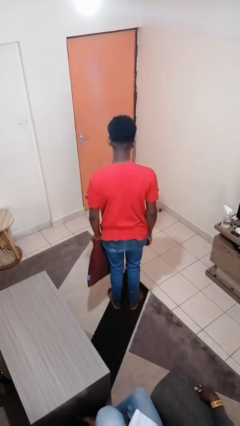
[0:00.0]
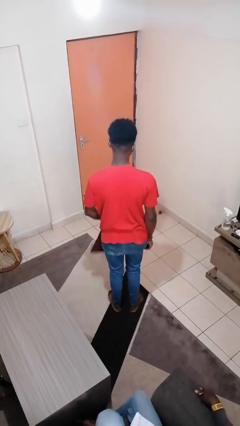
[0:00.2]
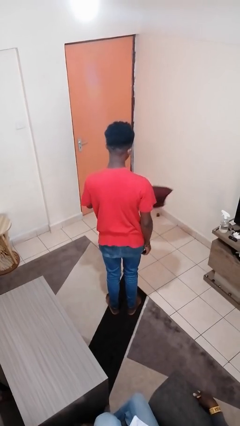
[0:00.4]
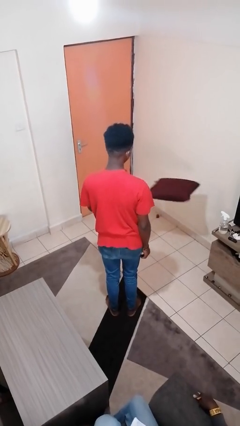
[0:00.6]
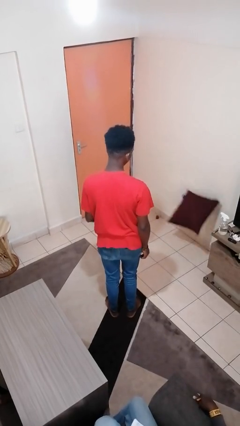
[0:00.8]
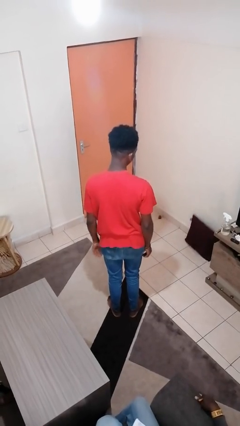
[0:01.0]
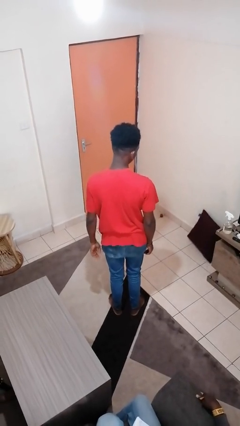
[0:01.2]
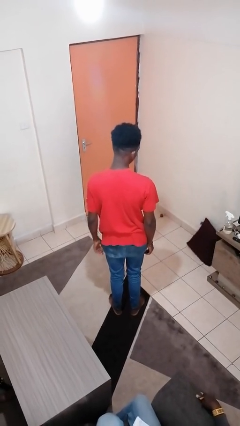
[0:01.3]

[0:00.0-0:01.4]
person throws object to ground

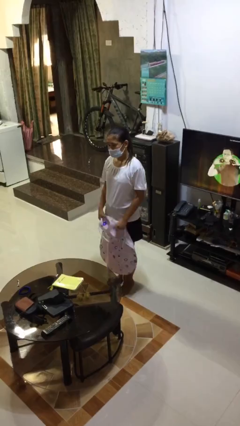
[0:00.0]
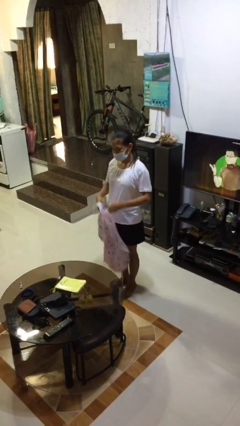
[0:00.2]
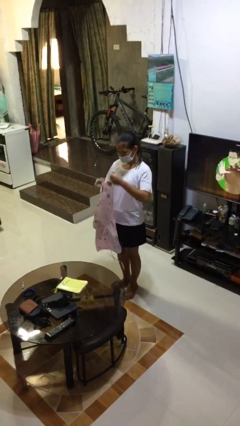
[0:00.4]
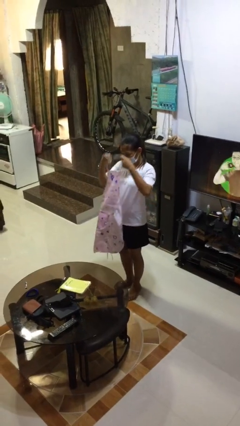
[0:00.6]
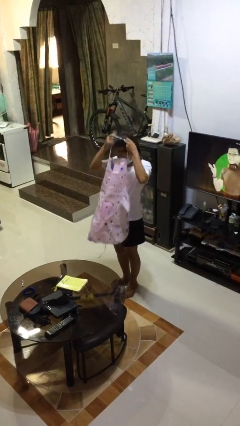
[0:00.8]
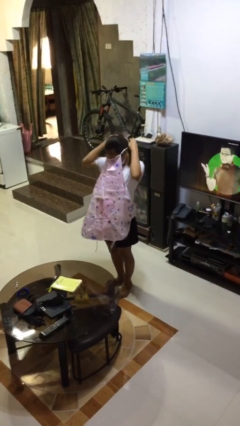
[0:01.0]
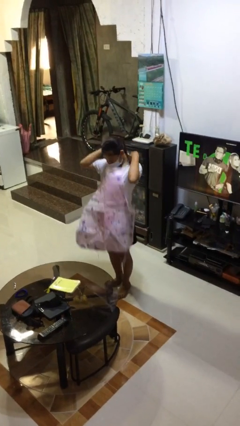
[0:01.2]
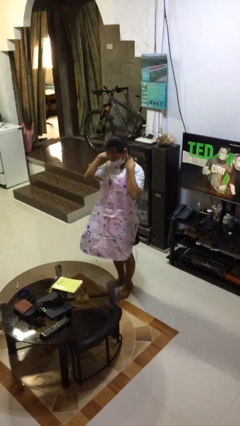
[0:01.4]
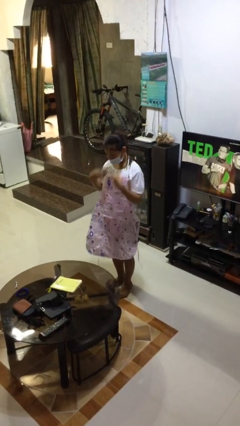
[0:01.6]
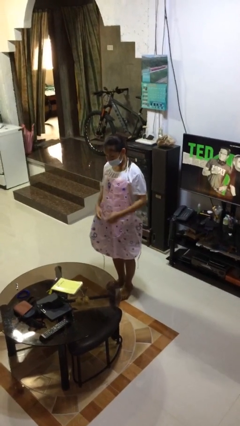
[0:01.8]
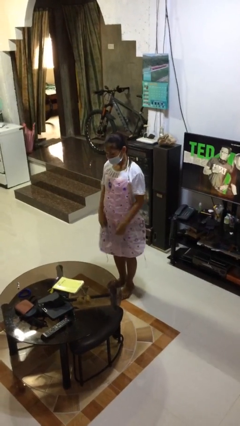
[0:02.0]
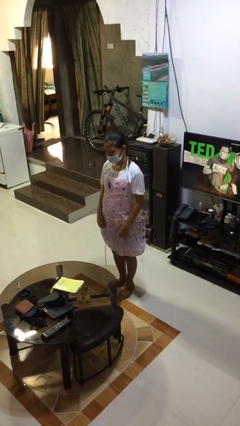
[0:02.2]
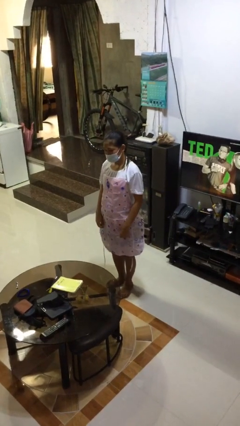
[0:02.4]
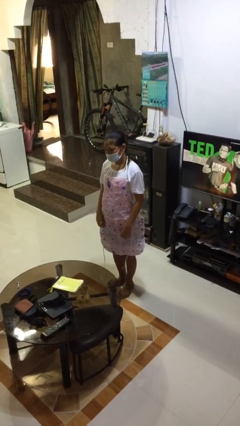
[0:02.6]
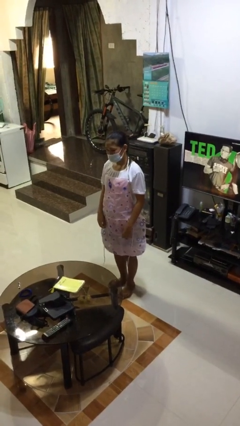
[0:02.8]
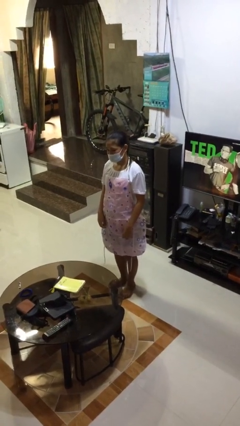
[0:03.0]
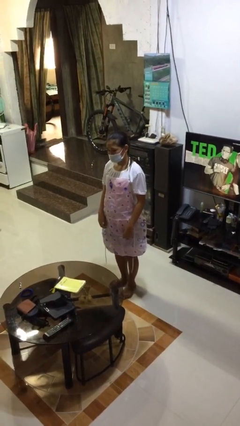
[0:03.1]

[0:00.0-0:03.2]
person puts on apron

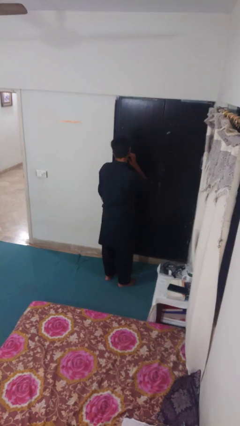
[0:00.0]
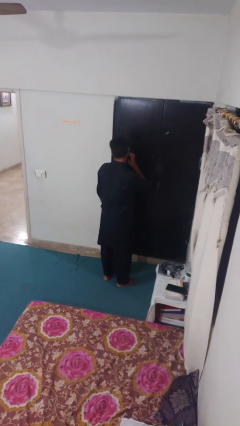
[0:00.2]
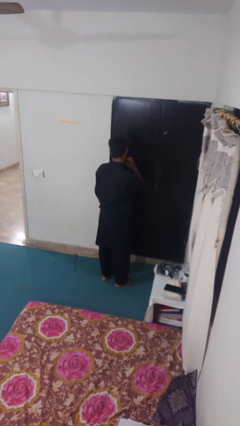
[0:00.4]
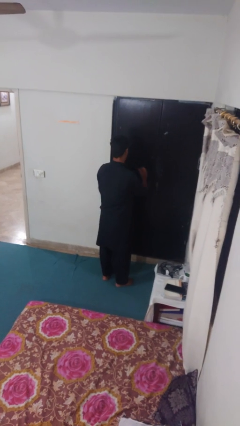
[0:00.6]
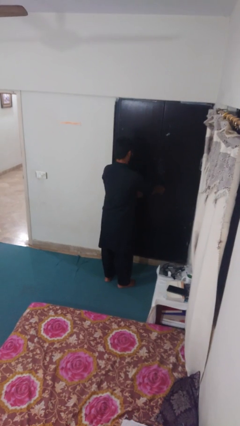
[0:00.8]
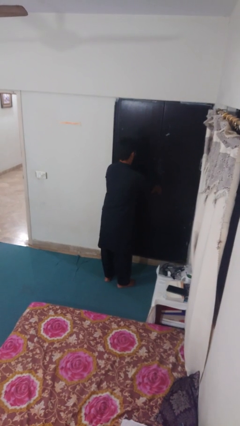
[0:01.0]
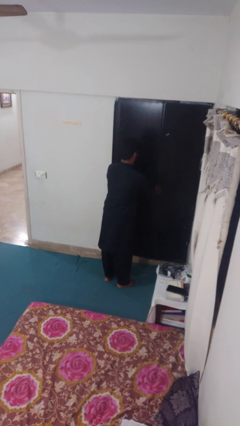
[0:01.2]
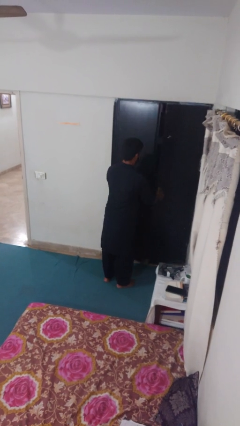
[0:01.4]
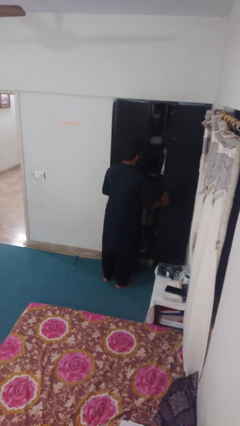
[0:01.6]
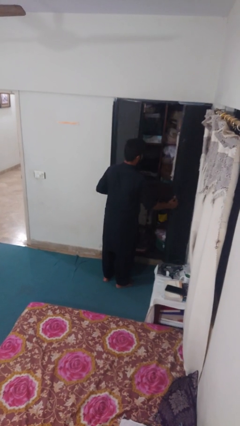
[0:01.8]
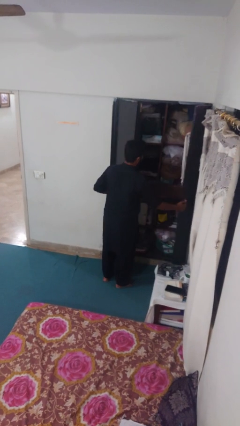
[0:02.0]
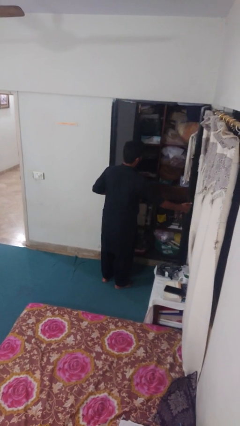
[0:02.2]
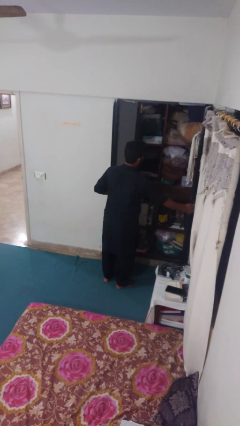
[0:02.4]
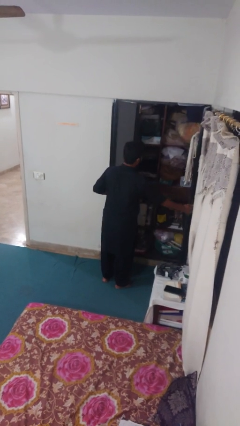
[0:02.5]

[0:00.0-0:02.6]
person opens closet door

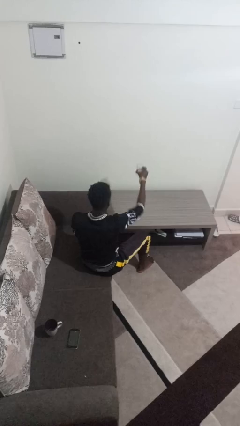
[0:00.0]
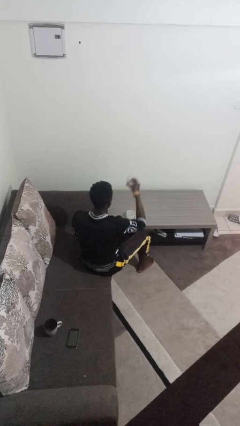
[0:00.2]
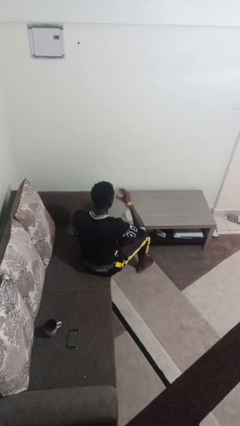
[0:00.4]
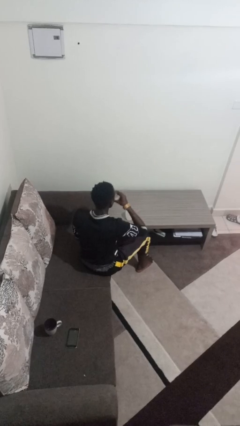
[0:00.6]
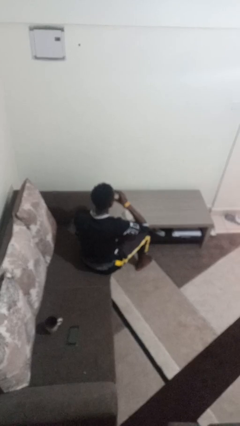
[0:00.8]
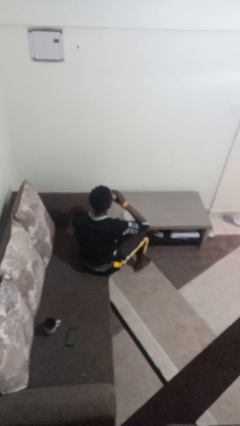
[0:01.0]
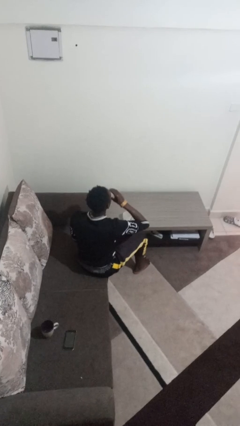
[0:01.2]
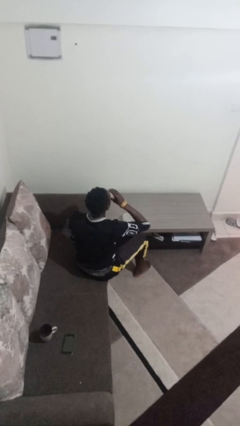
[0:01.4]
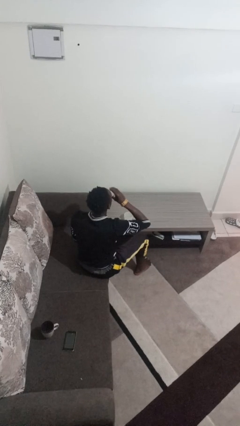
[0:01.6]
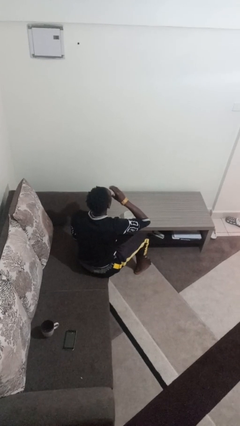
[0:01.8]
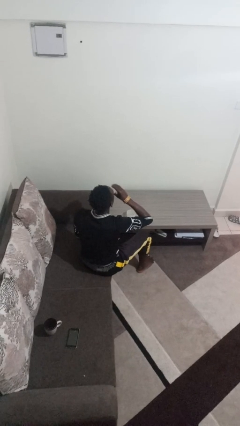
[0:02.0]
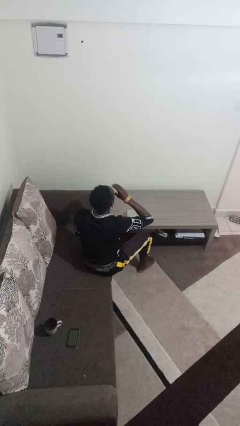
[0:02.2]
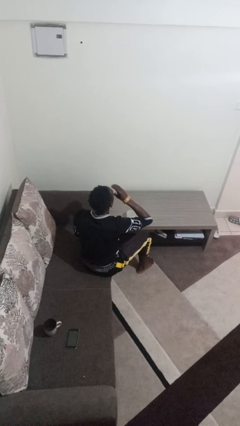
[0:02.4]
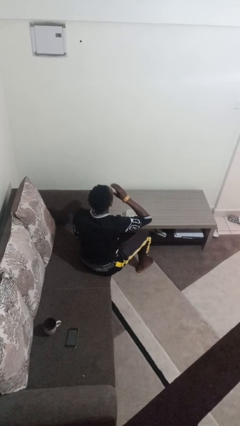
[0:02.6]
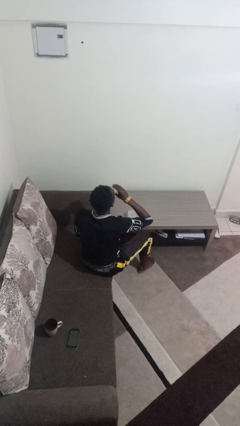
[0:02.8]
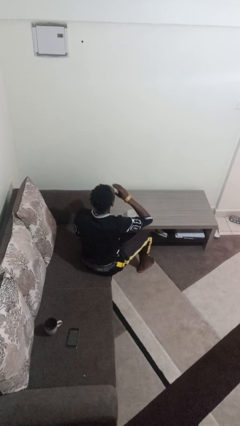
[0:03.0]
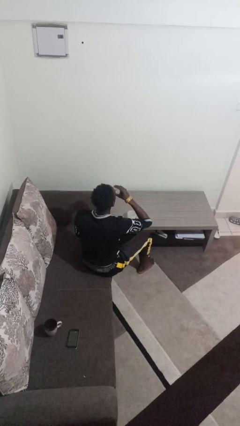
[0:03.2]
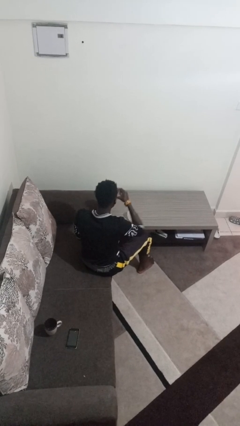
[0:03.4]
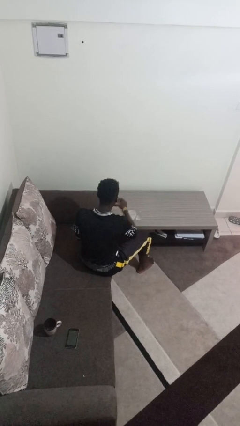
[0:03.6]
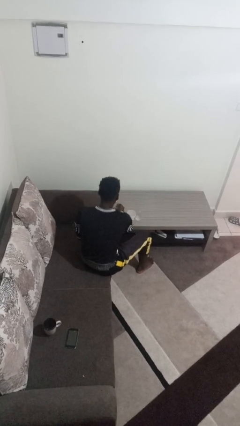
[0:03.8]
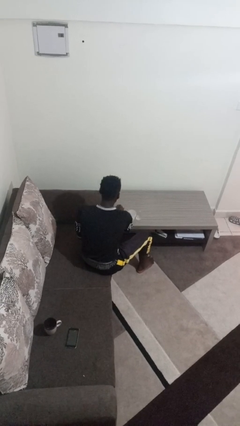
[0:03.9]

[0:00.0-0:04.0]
person drinks from shotglass

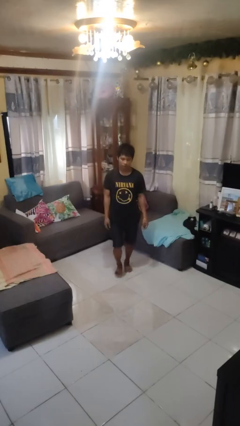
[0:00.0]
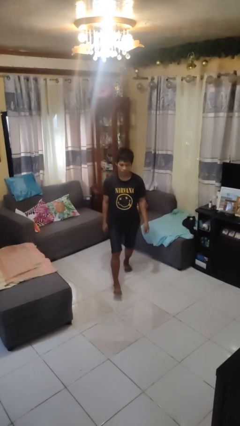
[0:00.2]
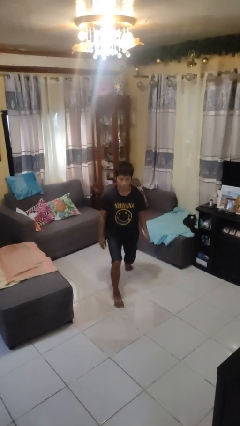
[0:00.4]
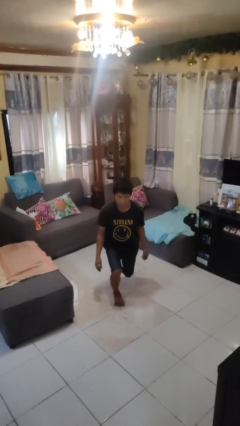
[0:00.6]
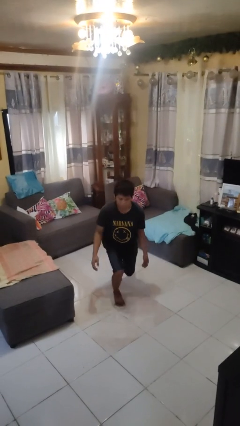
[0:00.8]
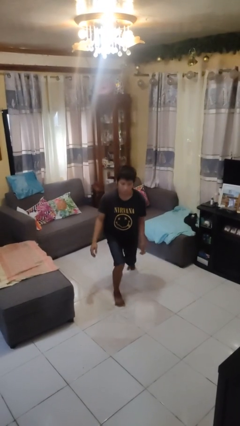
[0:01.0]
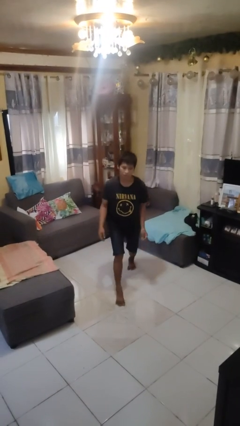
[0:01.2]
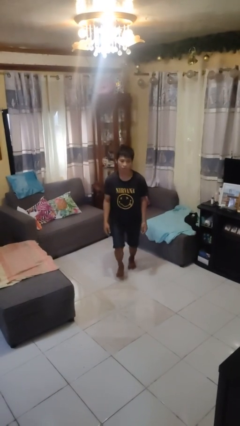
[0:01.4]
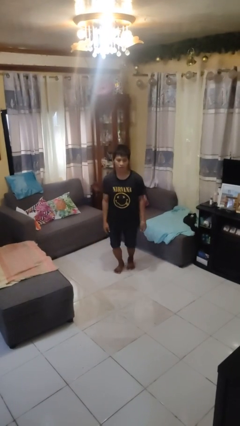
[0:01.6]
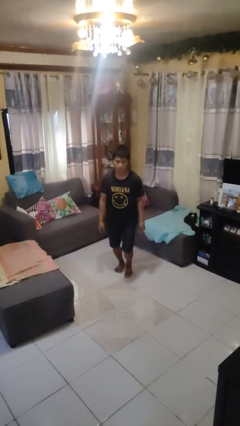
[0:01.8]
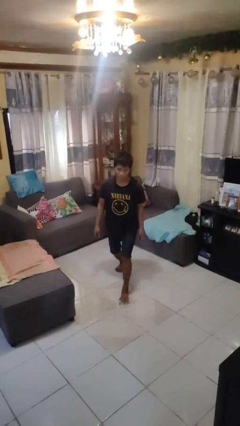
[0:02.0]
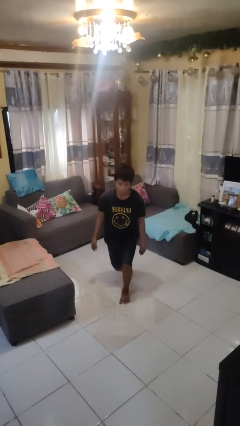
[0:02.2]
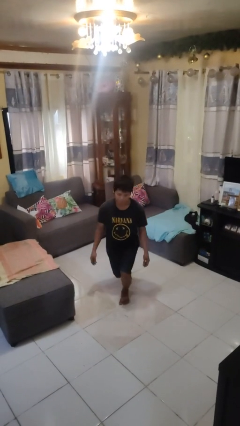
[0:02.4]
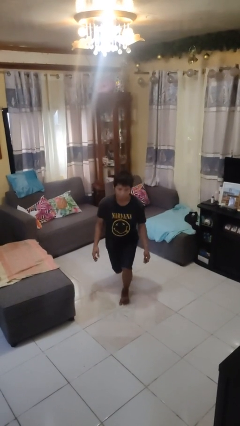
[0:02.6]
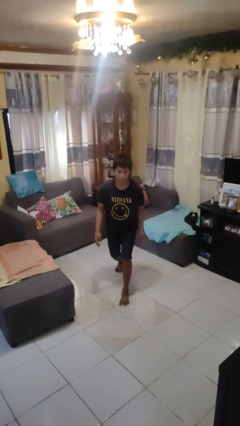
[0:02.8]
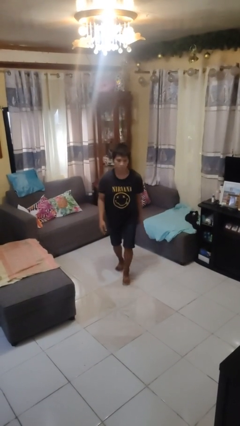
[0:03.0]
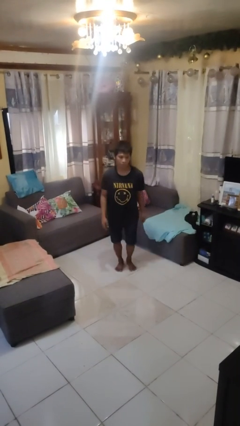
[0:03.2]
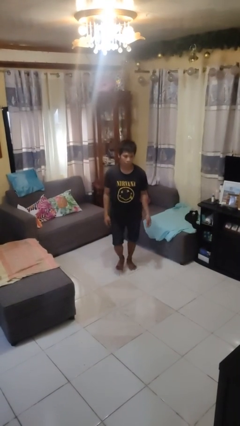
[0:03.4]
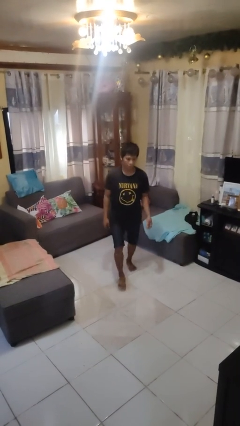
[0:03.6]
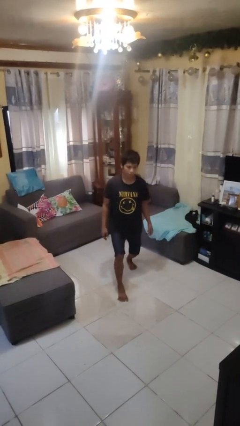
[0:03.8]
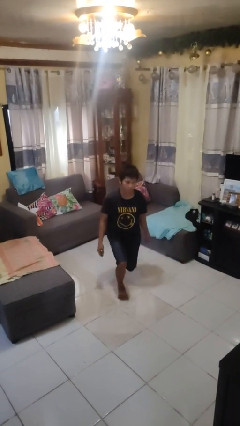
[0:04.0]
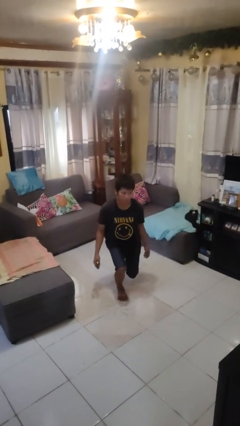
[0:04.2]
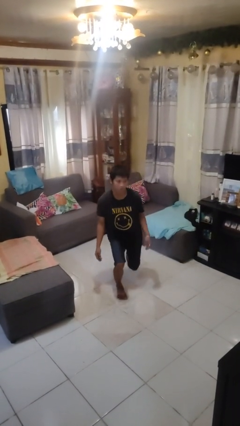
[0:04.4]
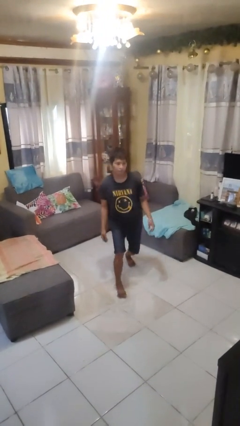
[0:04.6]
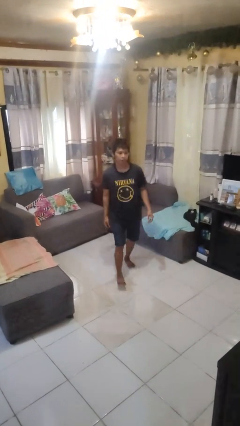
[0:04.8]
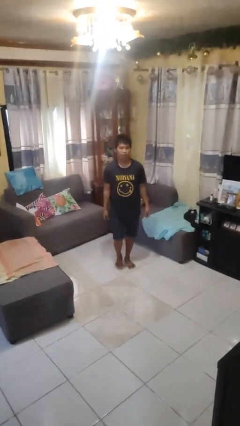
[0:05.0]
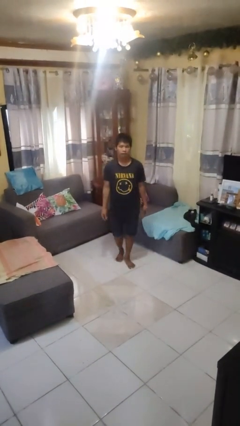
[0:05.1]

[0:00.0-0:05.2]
person exercises with lunges

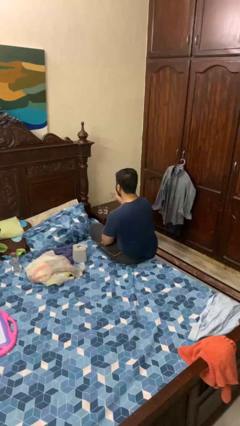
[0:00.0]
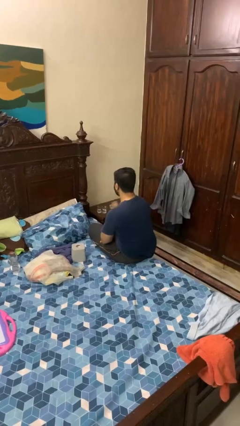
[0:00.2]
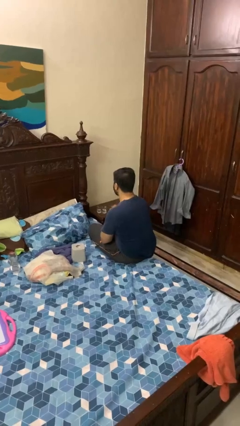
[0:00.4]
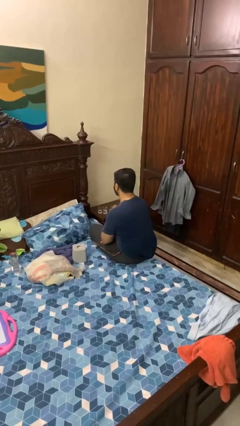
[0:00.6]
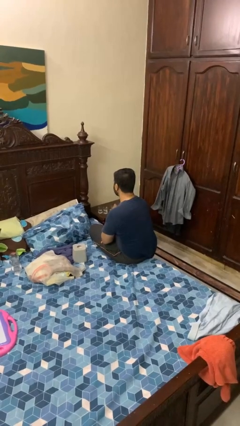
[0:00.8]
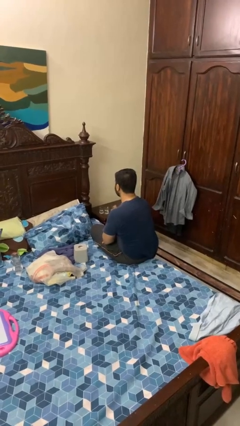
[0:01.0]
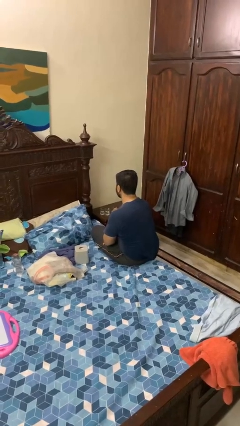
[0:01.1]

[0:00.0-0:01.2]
person puts down object on table
